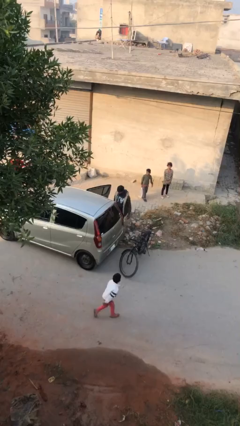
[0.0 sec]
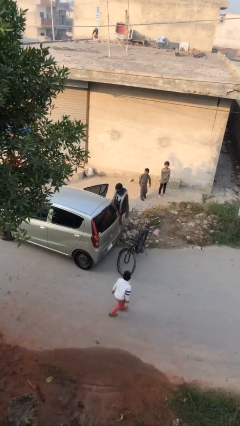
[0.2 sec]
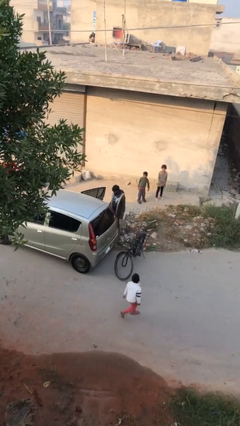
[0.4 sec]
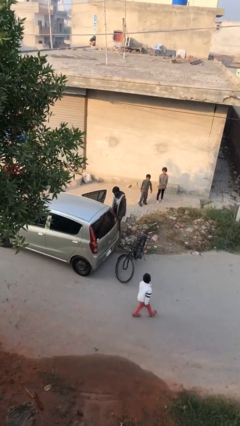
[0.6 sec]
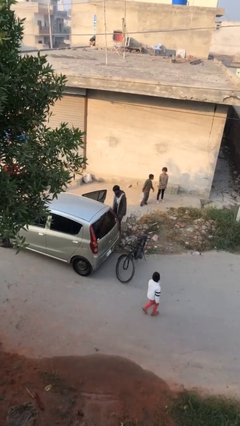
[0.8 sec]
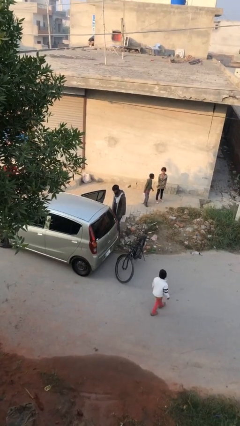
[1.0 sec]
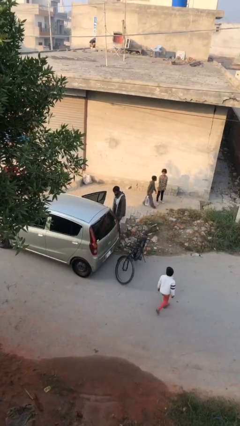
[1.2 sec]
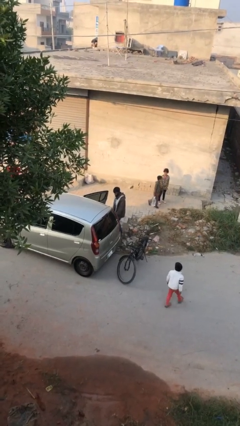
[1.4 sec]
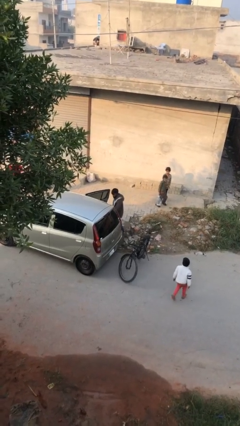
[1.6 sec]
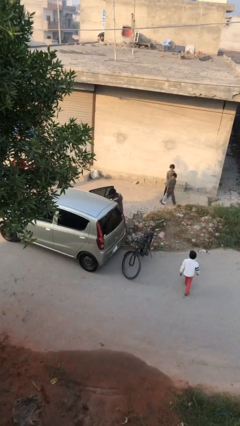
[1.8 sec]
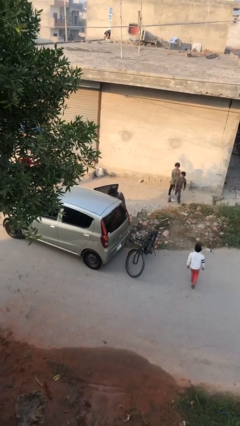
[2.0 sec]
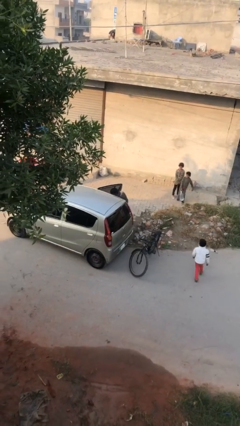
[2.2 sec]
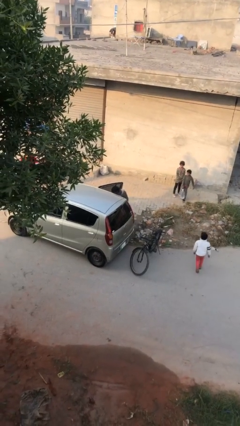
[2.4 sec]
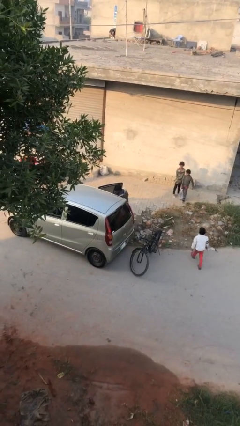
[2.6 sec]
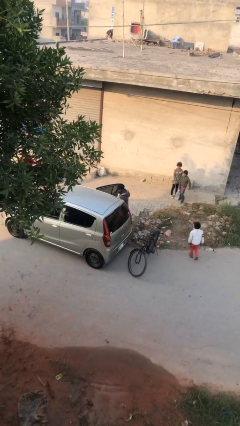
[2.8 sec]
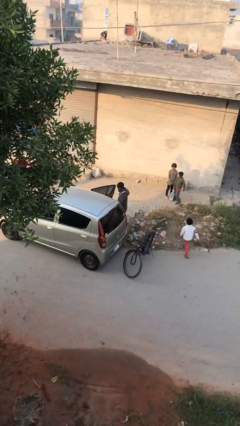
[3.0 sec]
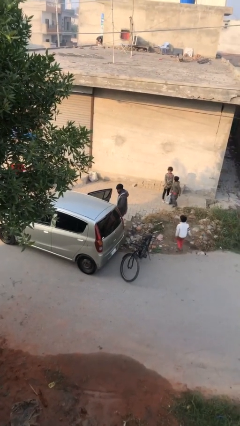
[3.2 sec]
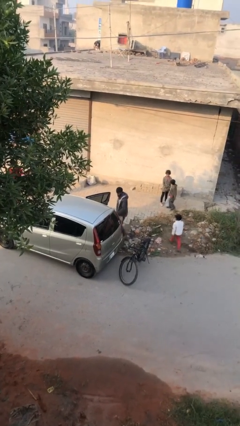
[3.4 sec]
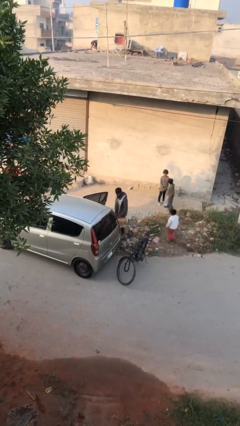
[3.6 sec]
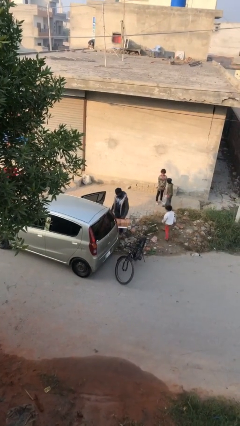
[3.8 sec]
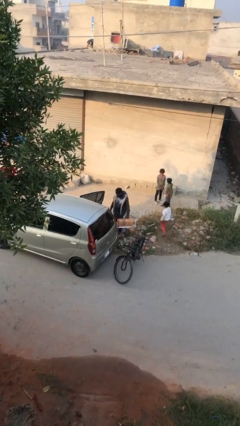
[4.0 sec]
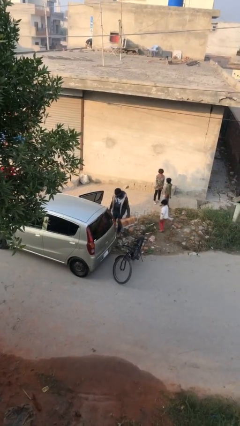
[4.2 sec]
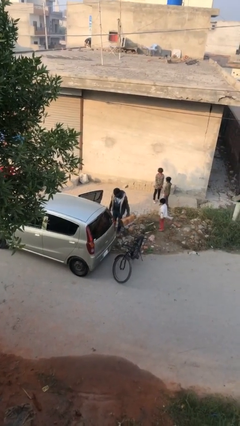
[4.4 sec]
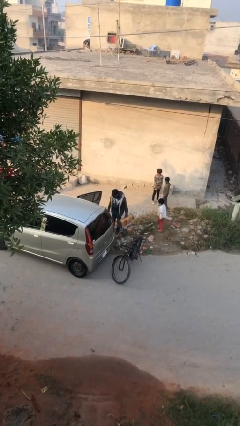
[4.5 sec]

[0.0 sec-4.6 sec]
person unloads car

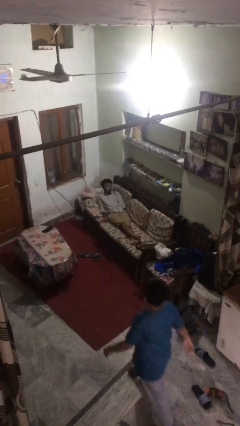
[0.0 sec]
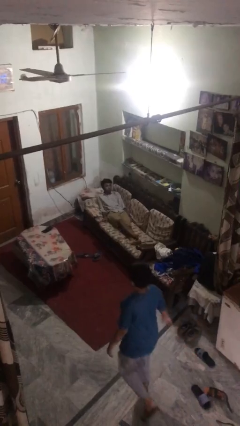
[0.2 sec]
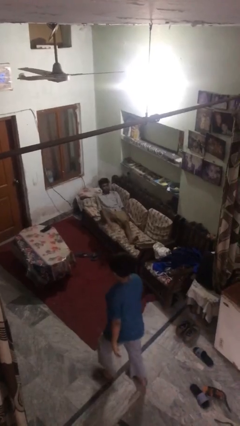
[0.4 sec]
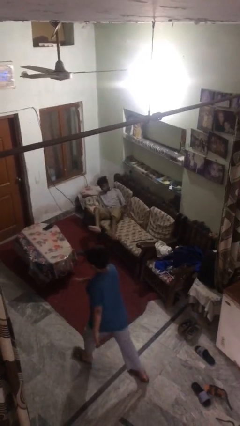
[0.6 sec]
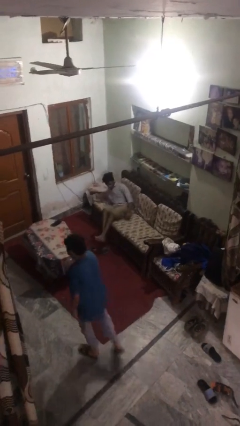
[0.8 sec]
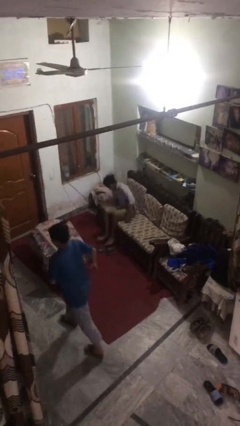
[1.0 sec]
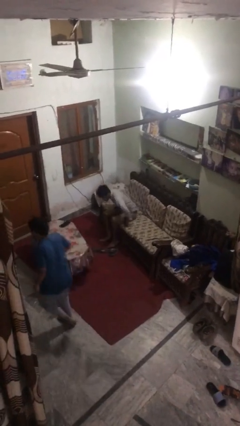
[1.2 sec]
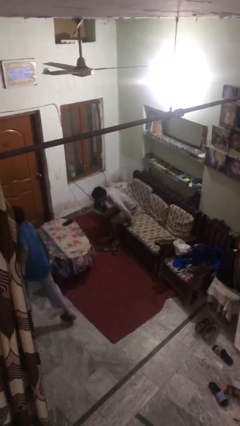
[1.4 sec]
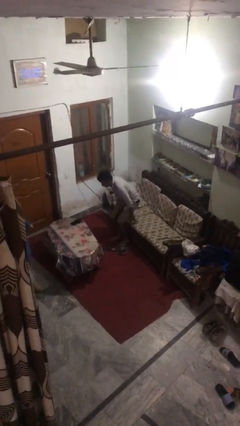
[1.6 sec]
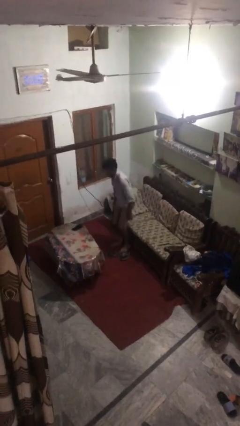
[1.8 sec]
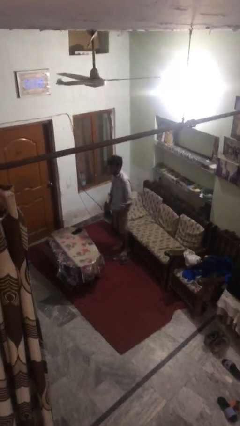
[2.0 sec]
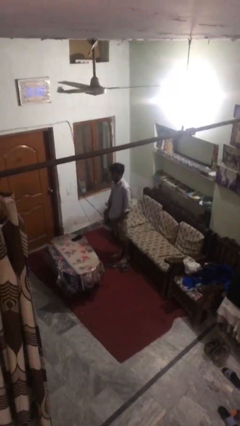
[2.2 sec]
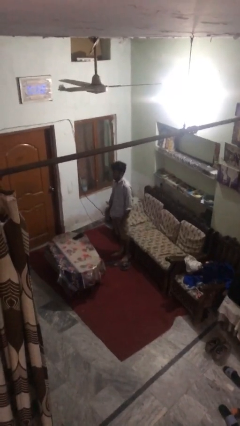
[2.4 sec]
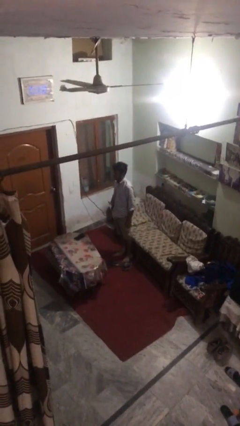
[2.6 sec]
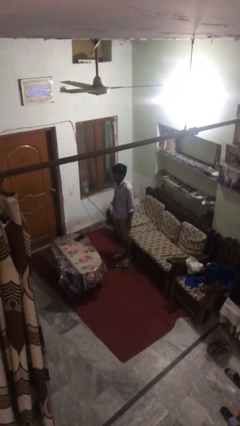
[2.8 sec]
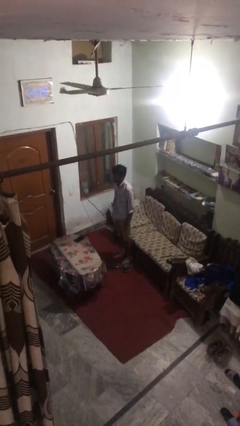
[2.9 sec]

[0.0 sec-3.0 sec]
person stands up

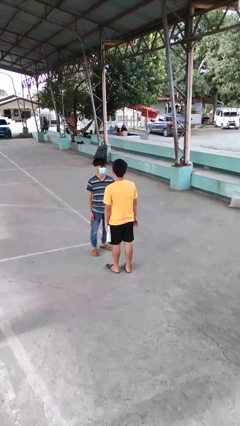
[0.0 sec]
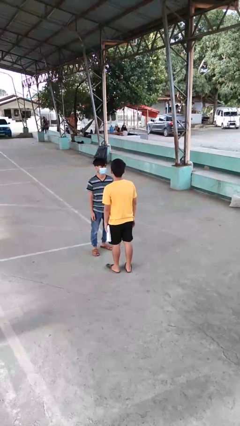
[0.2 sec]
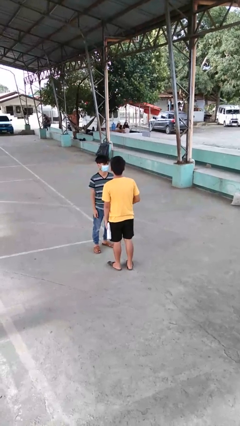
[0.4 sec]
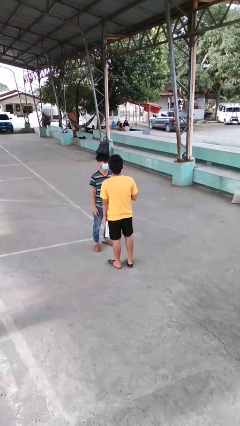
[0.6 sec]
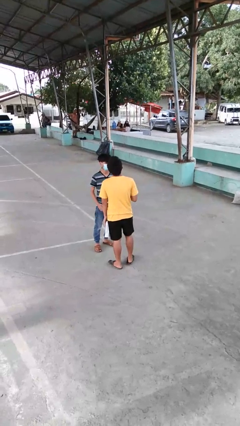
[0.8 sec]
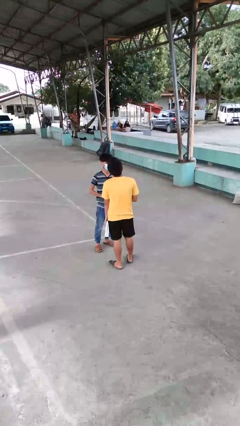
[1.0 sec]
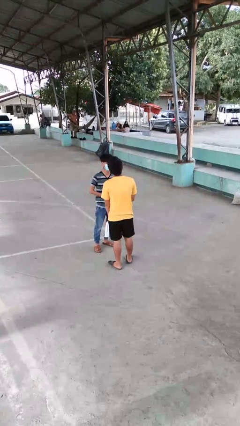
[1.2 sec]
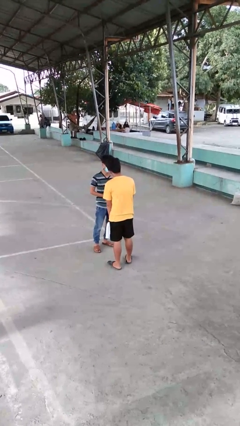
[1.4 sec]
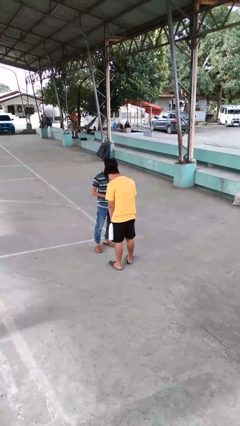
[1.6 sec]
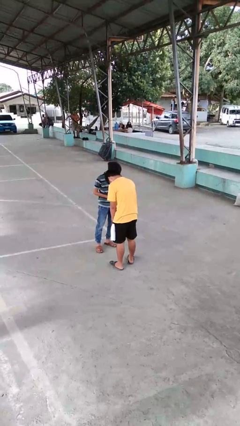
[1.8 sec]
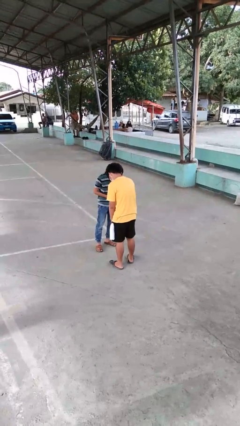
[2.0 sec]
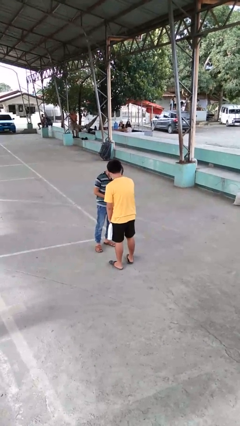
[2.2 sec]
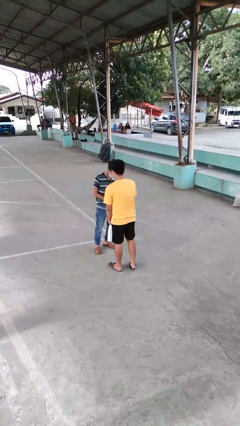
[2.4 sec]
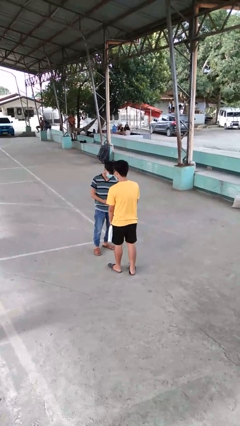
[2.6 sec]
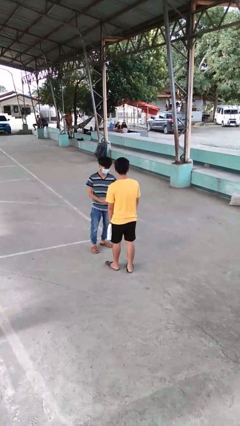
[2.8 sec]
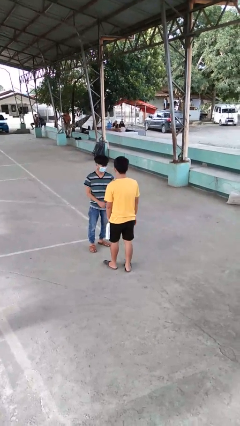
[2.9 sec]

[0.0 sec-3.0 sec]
person laughs with person

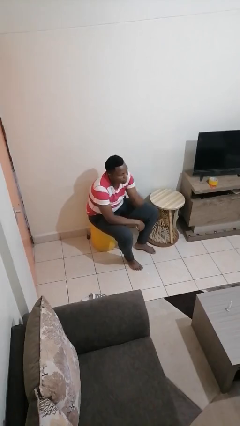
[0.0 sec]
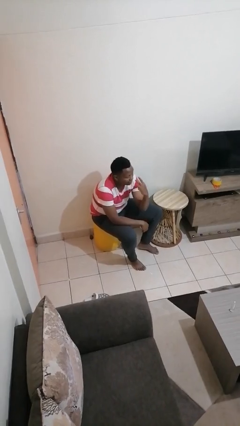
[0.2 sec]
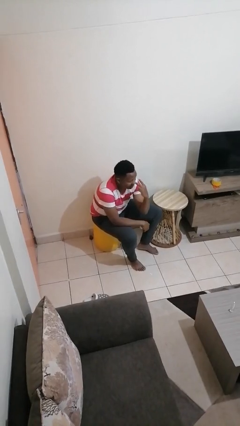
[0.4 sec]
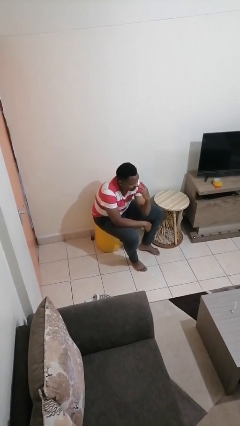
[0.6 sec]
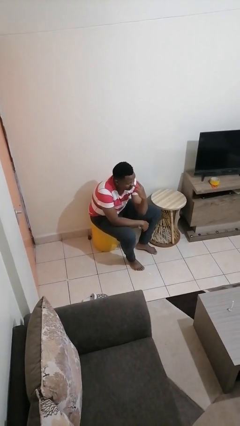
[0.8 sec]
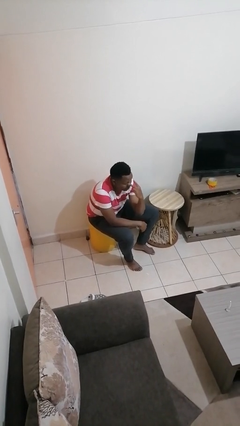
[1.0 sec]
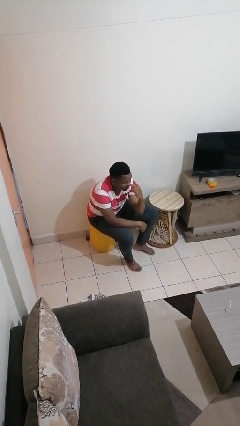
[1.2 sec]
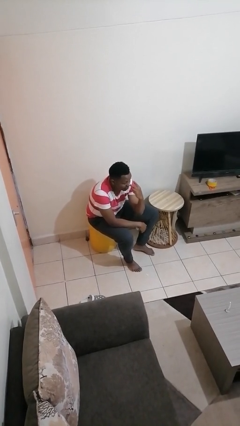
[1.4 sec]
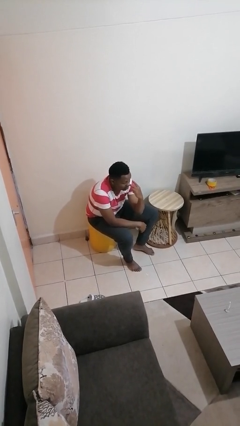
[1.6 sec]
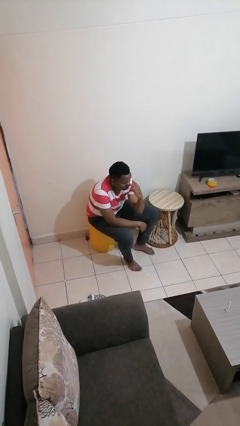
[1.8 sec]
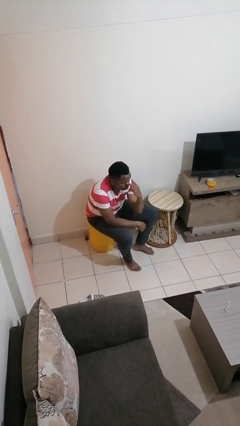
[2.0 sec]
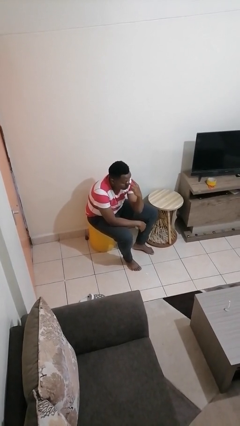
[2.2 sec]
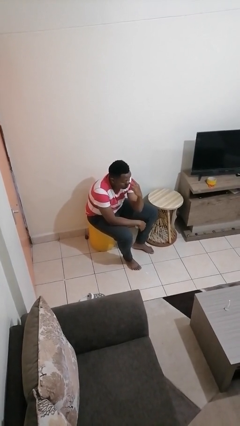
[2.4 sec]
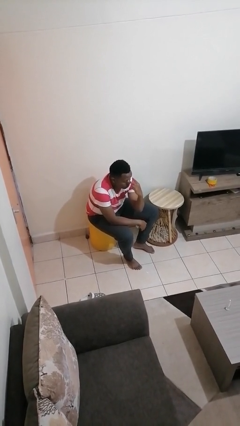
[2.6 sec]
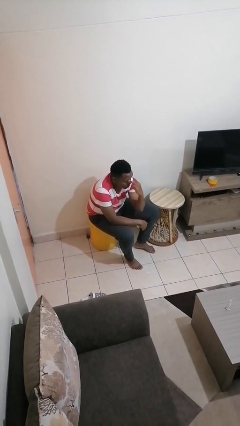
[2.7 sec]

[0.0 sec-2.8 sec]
person gestures watch closely

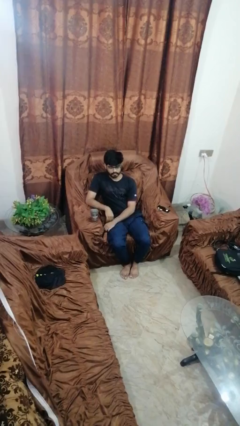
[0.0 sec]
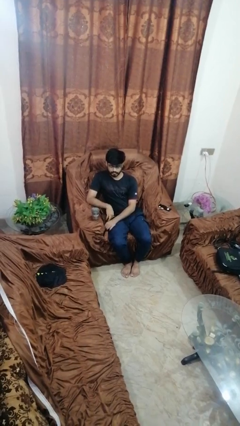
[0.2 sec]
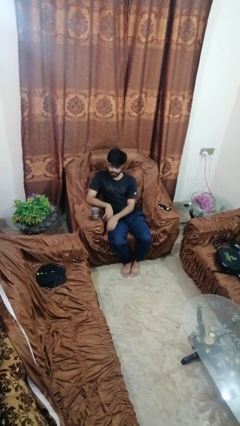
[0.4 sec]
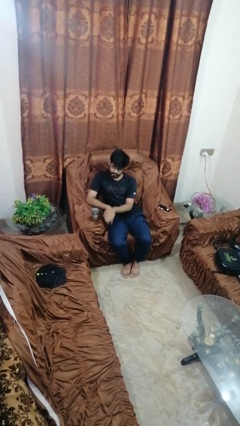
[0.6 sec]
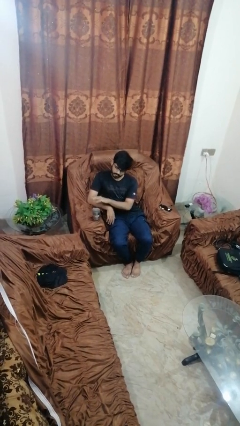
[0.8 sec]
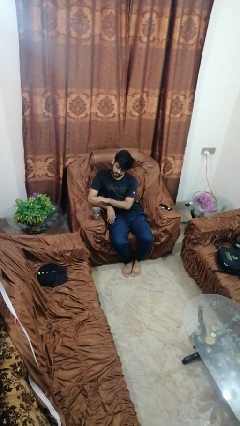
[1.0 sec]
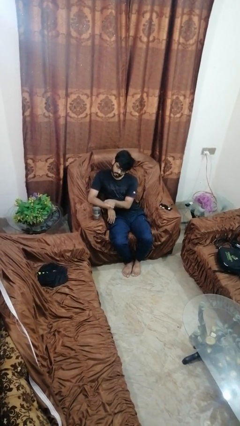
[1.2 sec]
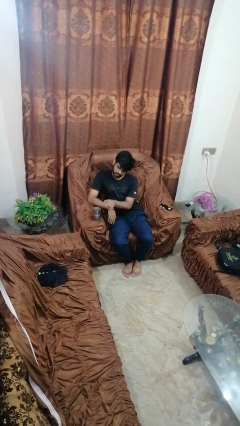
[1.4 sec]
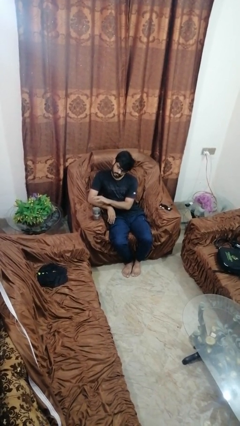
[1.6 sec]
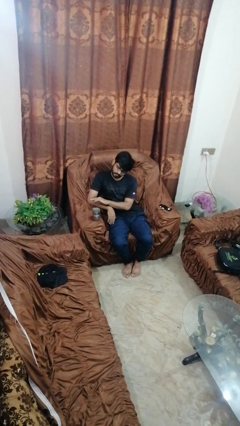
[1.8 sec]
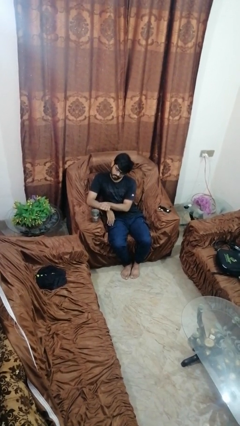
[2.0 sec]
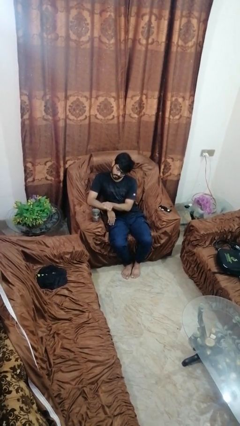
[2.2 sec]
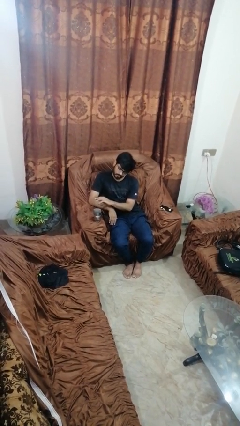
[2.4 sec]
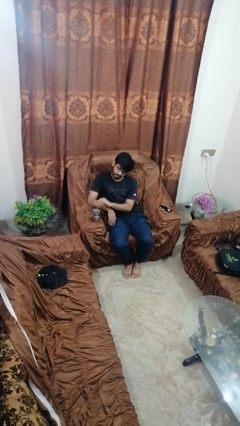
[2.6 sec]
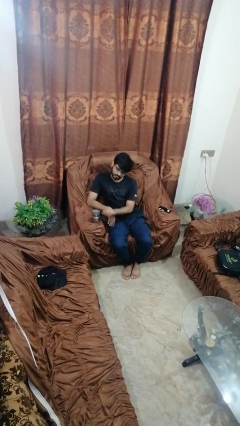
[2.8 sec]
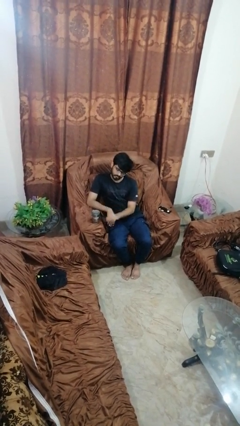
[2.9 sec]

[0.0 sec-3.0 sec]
person waves hand over object

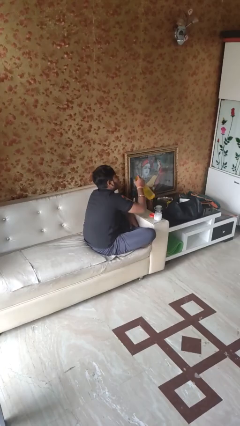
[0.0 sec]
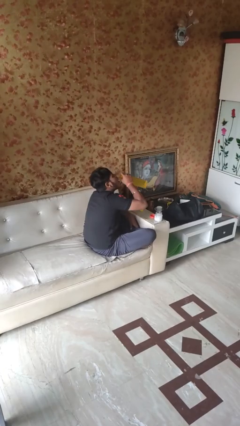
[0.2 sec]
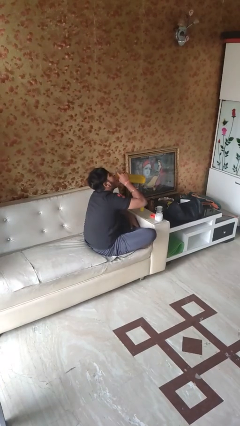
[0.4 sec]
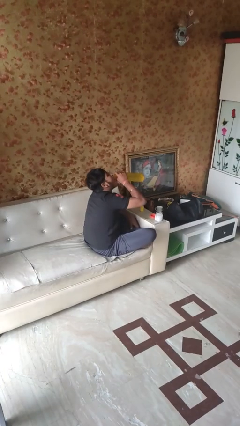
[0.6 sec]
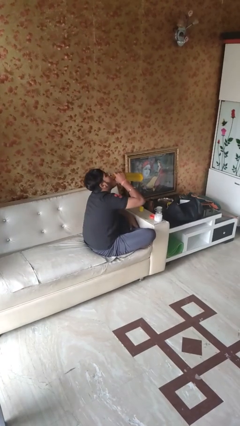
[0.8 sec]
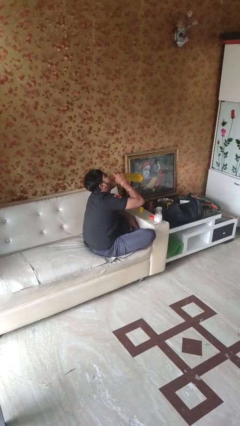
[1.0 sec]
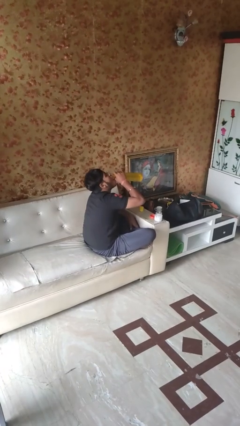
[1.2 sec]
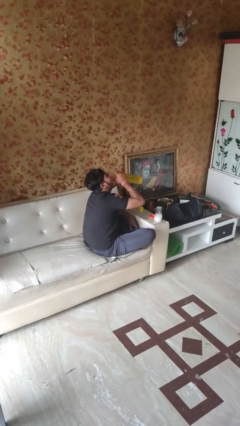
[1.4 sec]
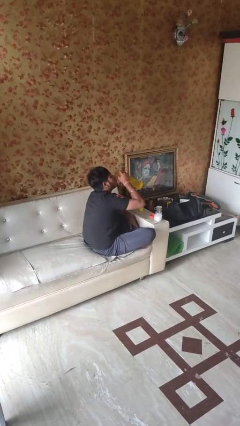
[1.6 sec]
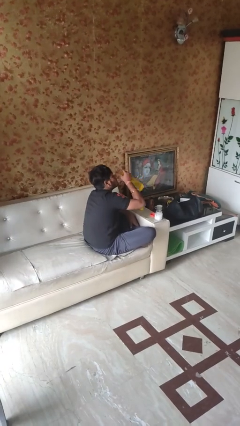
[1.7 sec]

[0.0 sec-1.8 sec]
person drinks from cup
